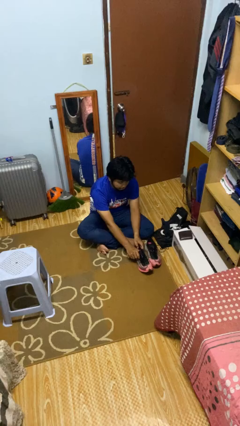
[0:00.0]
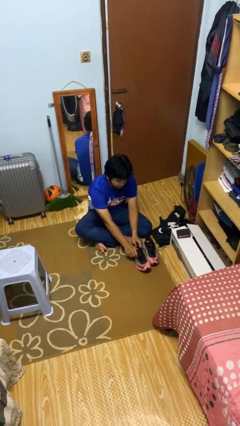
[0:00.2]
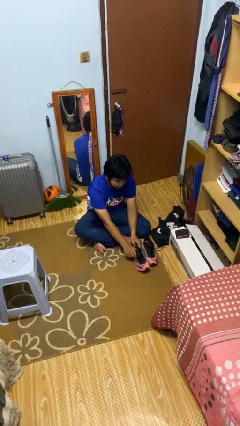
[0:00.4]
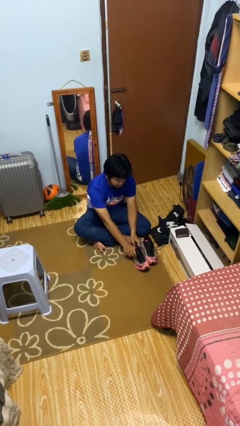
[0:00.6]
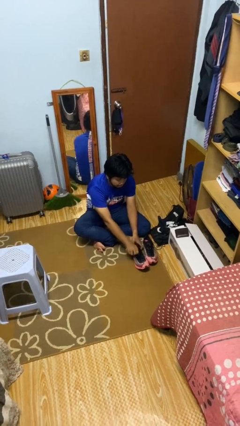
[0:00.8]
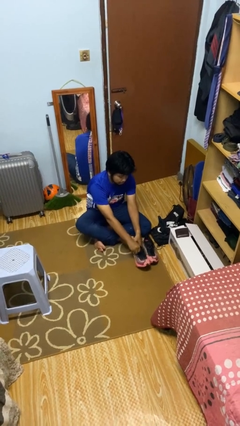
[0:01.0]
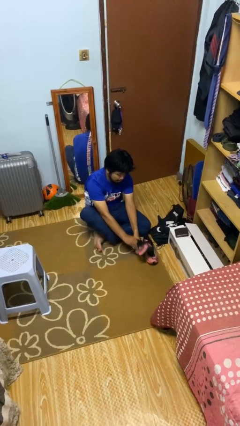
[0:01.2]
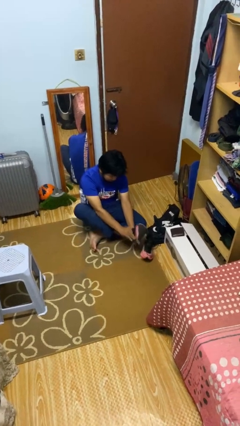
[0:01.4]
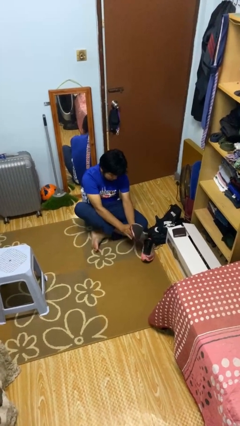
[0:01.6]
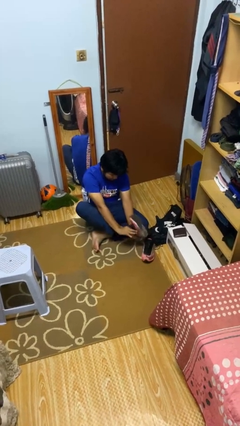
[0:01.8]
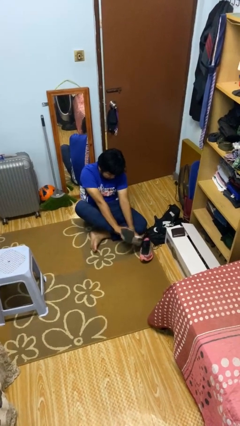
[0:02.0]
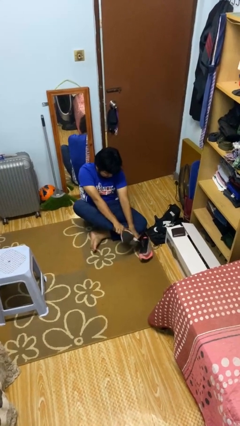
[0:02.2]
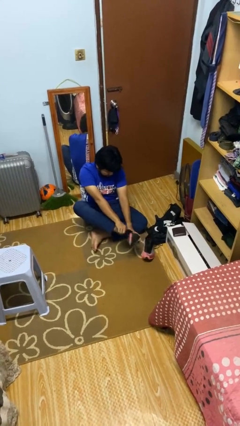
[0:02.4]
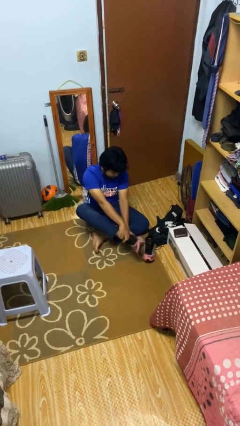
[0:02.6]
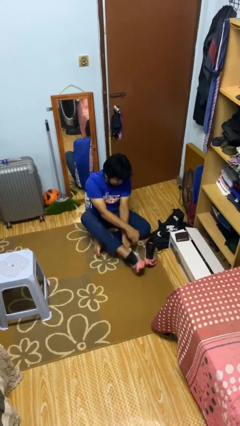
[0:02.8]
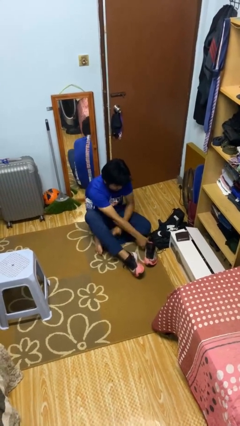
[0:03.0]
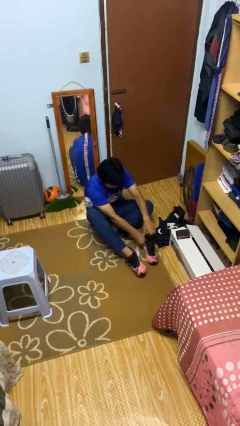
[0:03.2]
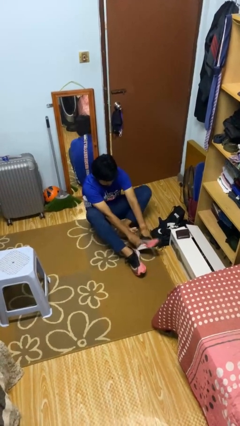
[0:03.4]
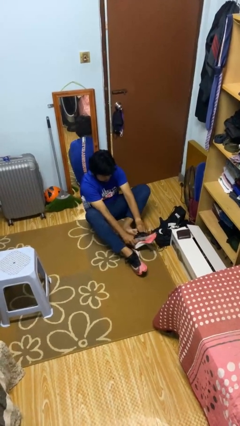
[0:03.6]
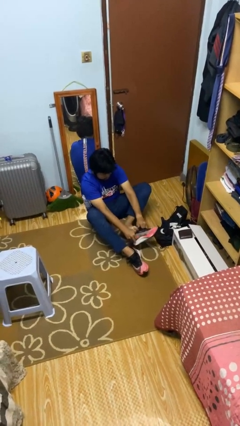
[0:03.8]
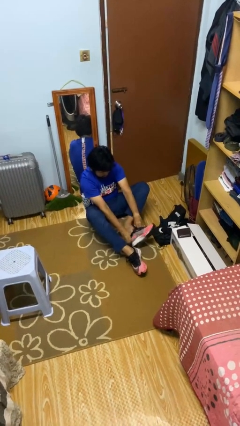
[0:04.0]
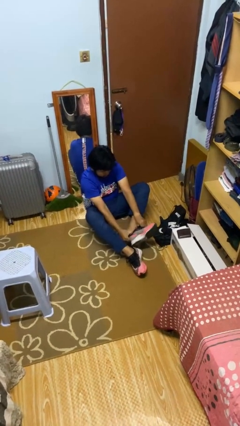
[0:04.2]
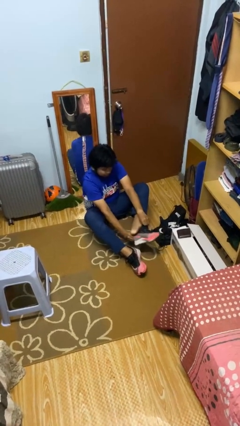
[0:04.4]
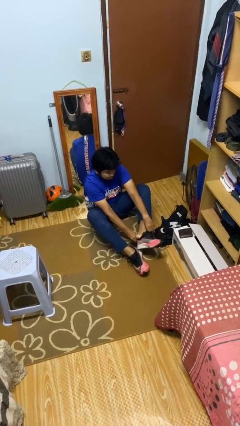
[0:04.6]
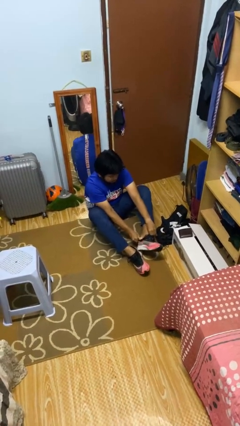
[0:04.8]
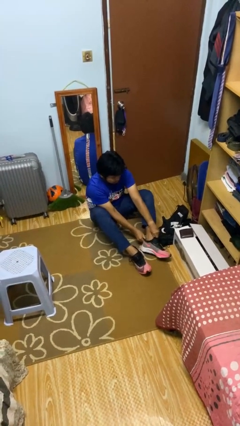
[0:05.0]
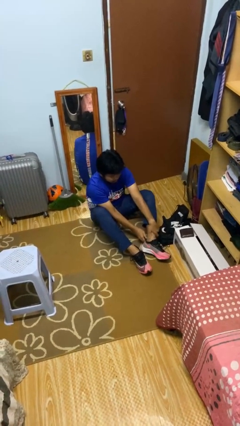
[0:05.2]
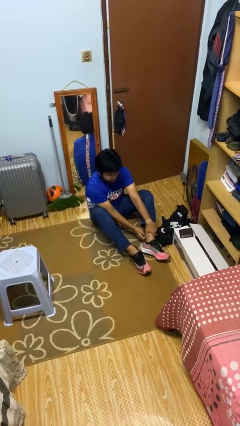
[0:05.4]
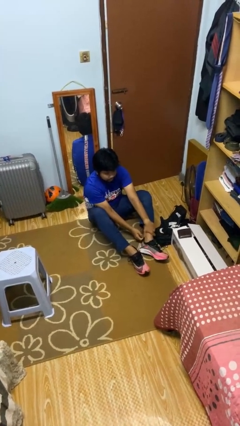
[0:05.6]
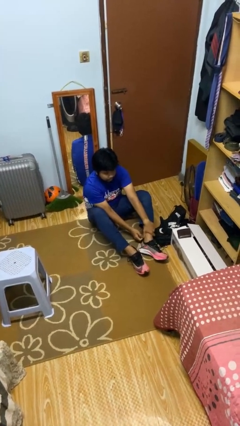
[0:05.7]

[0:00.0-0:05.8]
person puts on shoes

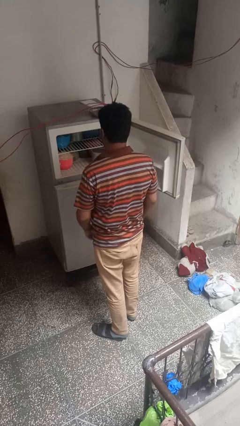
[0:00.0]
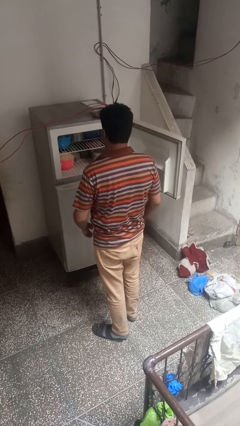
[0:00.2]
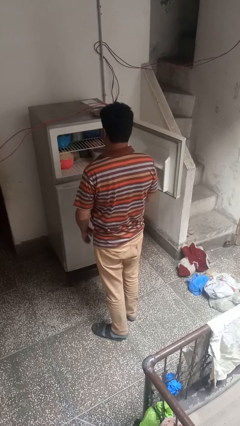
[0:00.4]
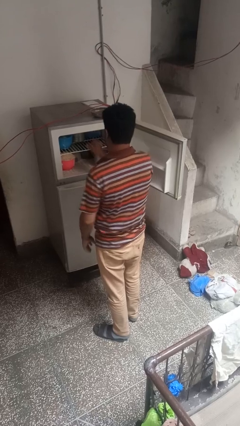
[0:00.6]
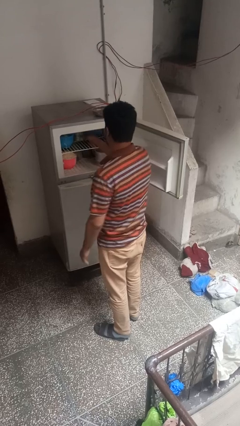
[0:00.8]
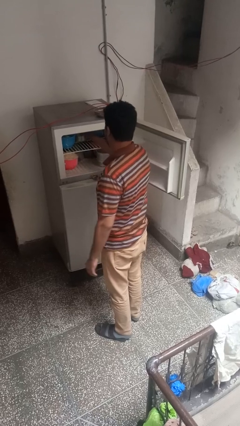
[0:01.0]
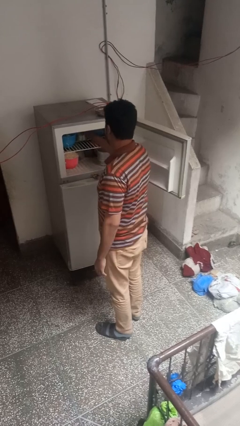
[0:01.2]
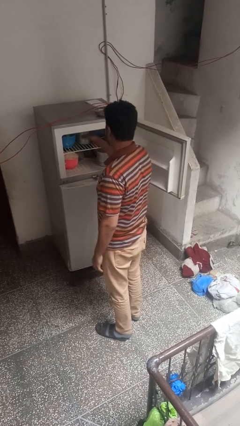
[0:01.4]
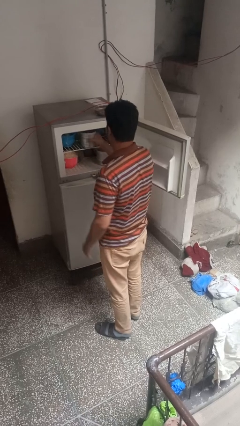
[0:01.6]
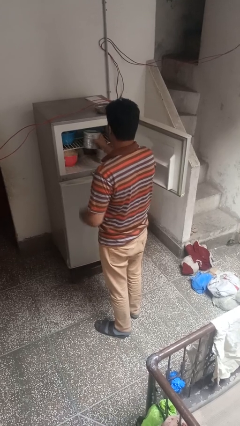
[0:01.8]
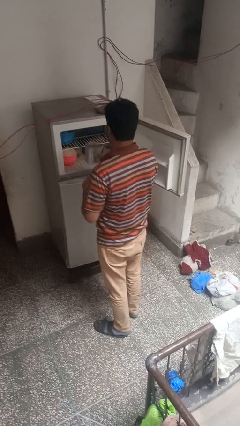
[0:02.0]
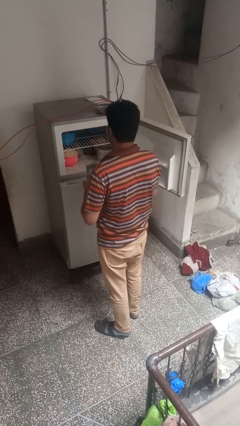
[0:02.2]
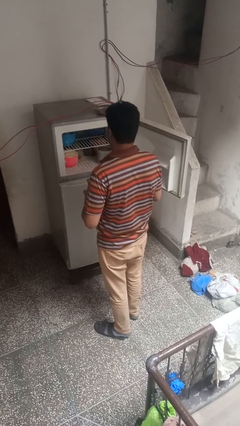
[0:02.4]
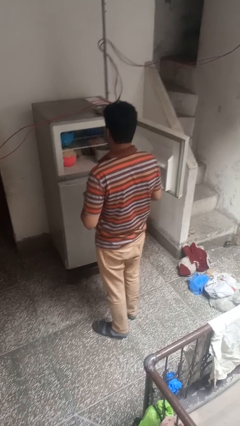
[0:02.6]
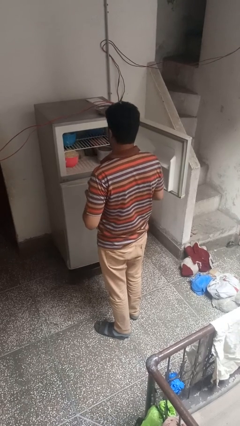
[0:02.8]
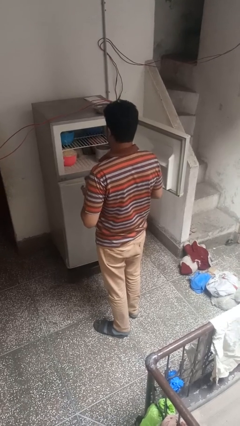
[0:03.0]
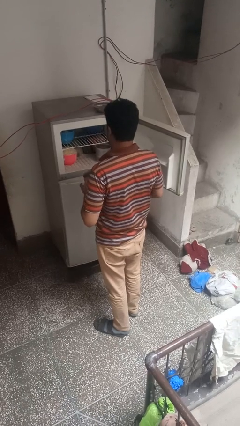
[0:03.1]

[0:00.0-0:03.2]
person takes object from refrigerator

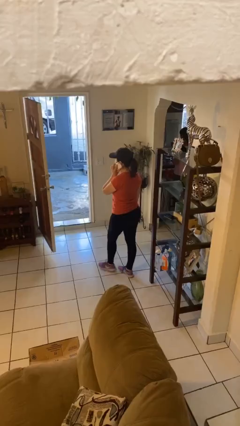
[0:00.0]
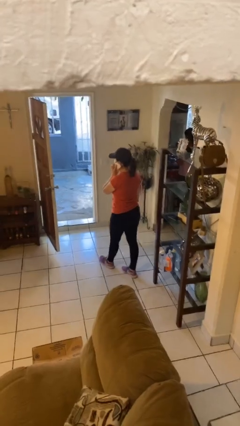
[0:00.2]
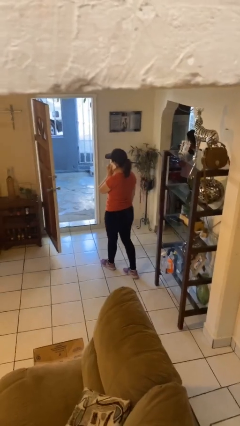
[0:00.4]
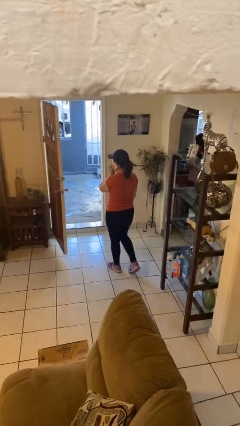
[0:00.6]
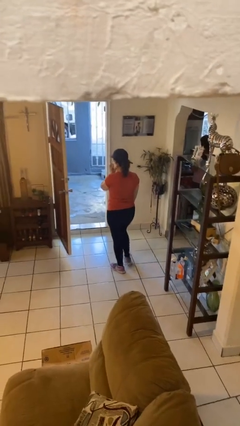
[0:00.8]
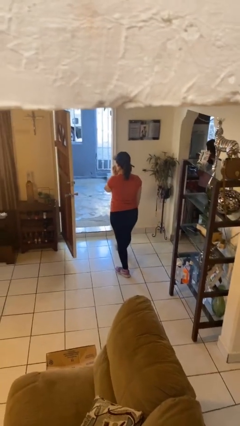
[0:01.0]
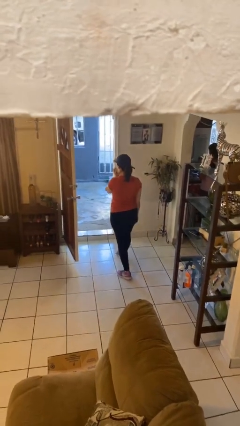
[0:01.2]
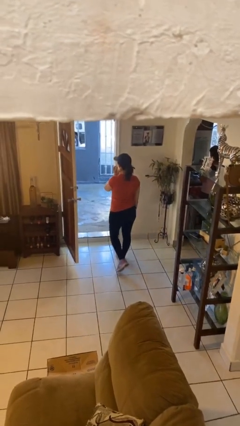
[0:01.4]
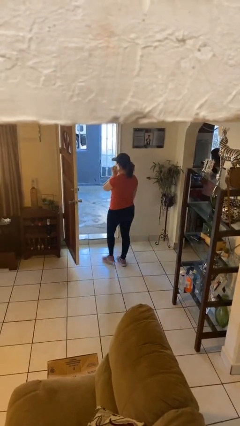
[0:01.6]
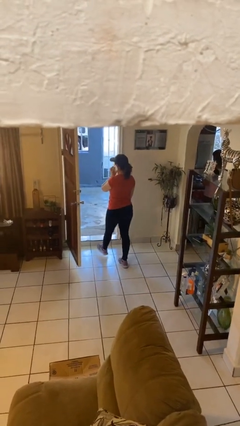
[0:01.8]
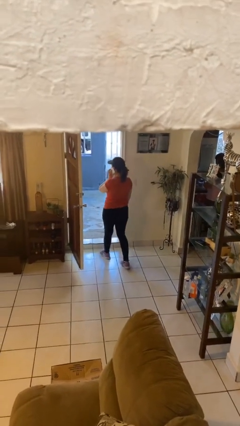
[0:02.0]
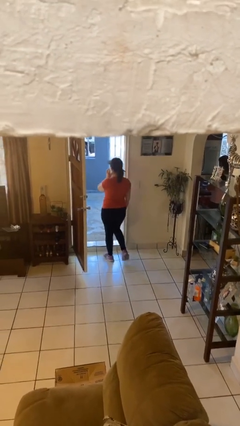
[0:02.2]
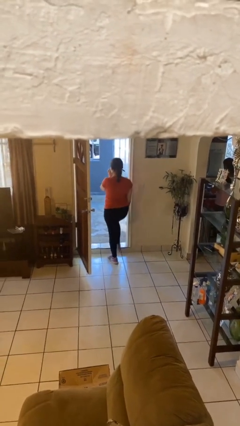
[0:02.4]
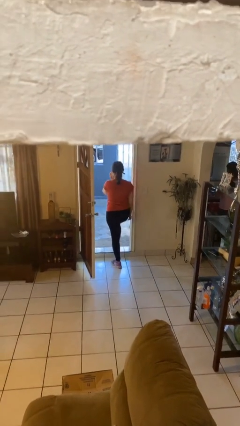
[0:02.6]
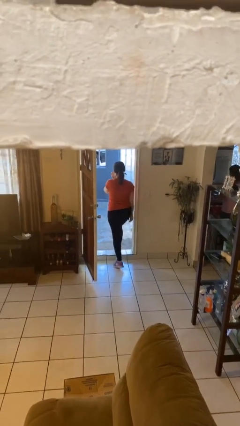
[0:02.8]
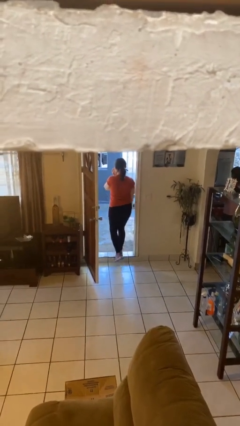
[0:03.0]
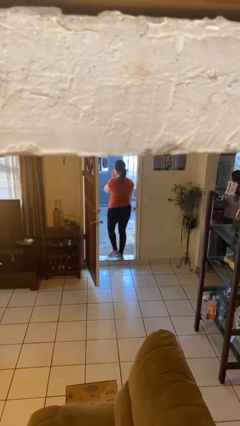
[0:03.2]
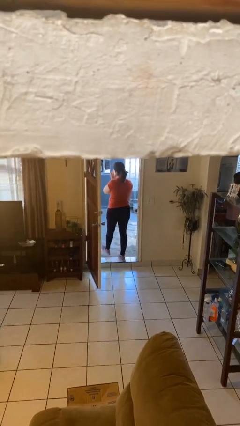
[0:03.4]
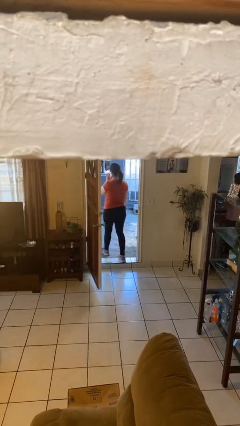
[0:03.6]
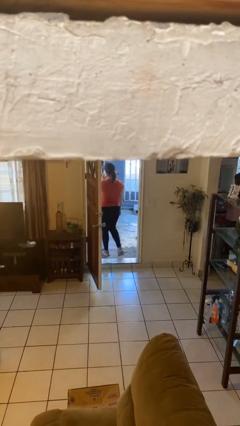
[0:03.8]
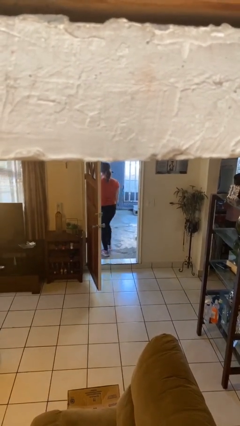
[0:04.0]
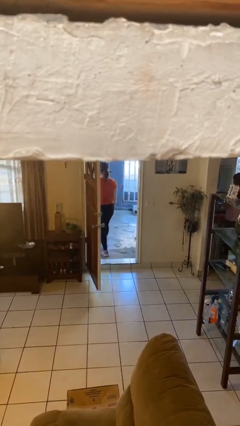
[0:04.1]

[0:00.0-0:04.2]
person exits scene through structure

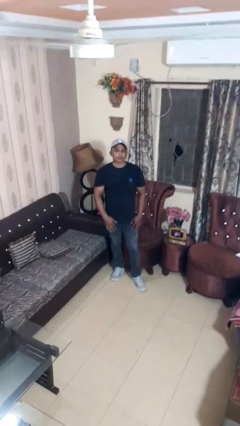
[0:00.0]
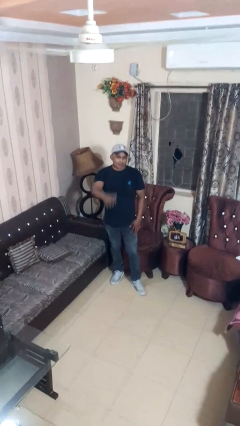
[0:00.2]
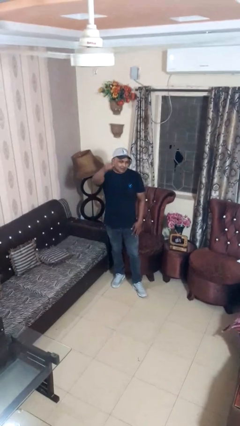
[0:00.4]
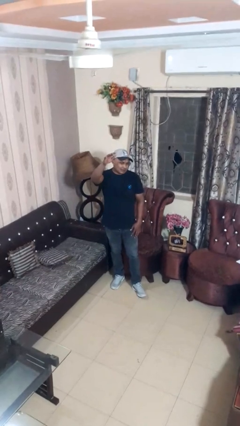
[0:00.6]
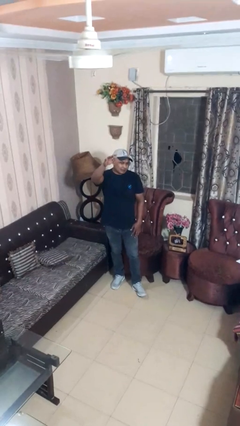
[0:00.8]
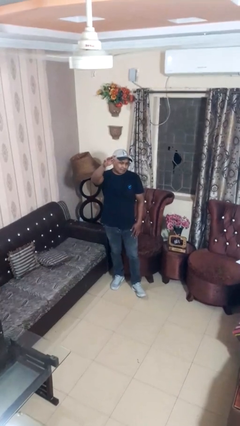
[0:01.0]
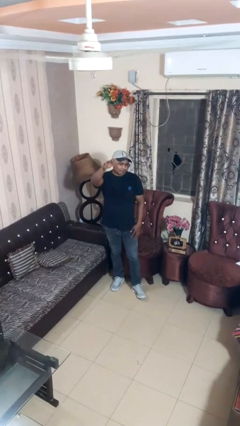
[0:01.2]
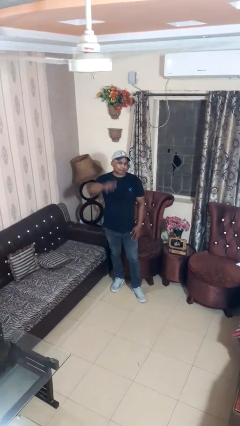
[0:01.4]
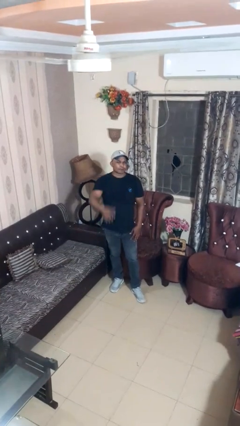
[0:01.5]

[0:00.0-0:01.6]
person gestures swipe up

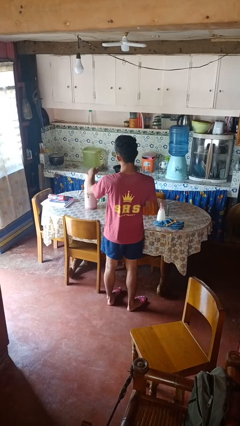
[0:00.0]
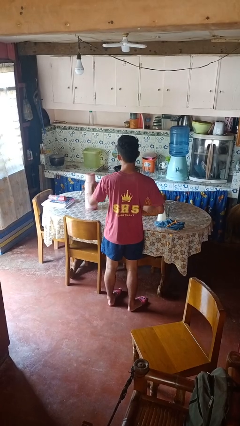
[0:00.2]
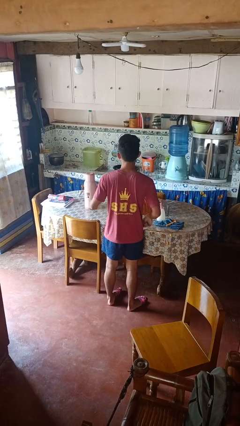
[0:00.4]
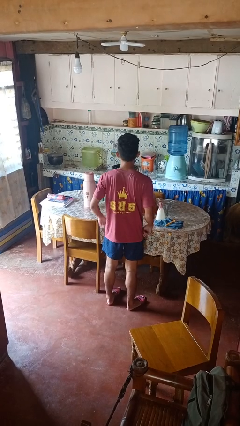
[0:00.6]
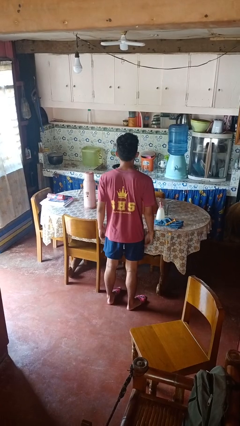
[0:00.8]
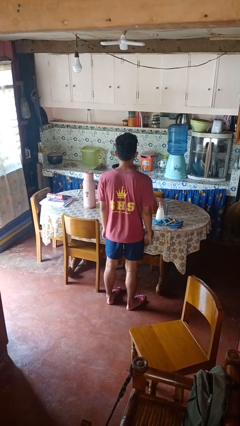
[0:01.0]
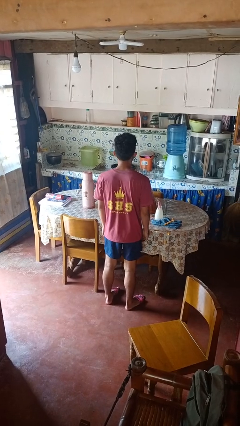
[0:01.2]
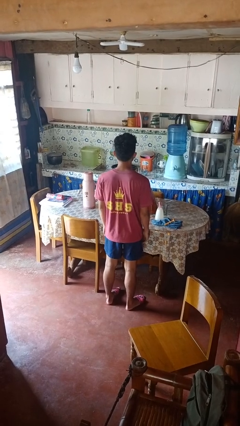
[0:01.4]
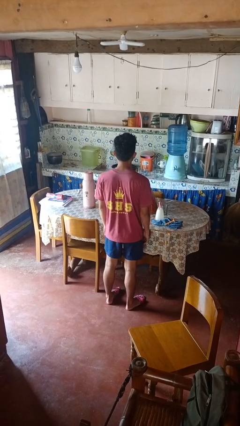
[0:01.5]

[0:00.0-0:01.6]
person swats bug

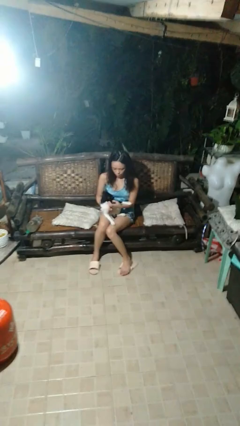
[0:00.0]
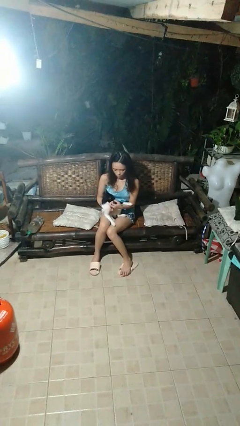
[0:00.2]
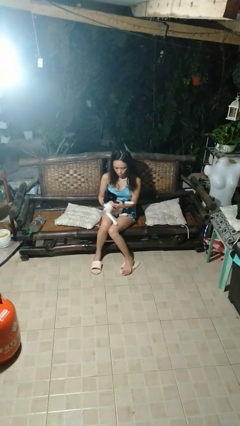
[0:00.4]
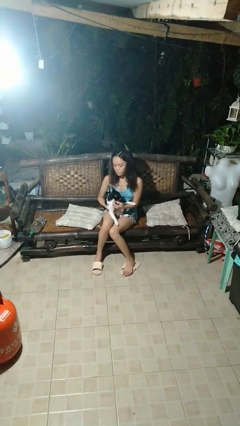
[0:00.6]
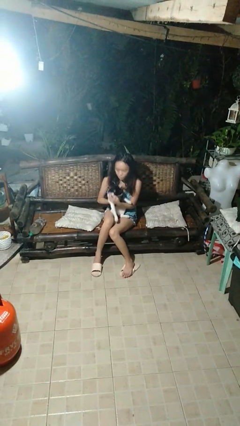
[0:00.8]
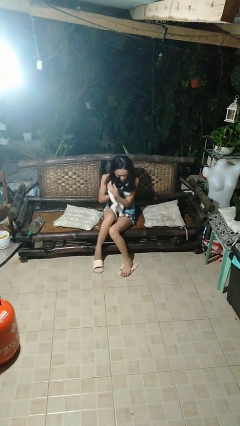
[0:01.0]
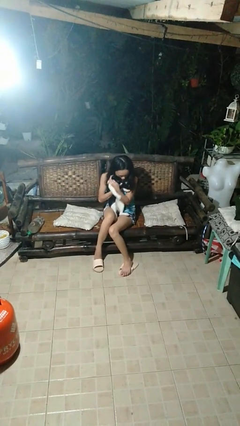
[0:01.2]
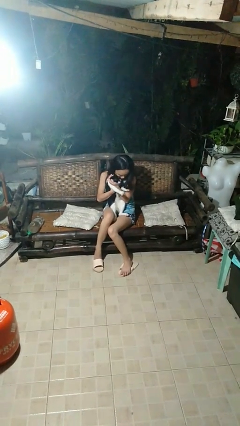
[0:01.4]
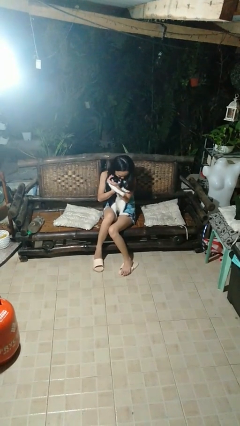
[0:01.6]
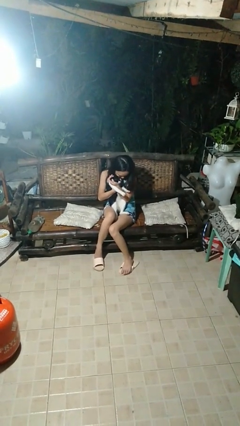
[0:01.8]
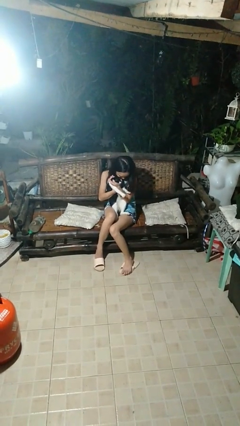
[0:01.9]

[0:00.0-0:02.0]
person hugs cat
